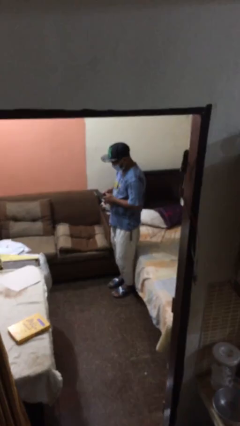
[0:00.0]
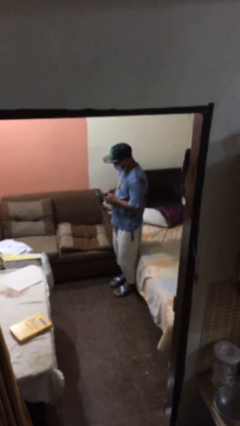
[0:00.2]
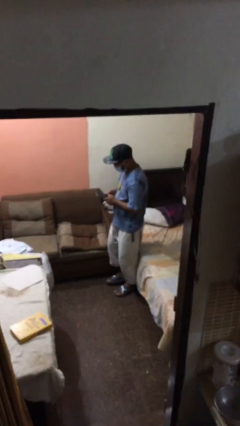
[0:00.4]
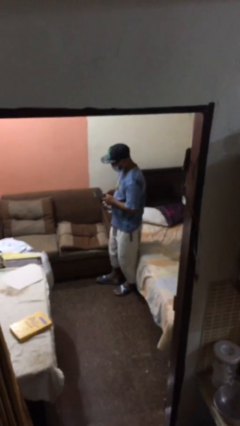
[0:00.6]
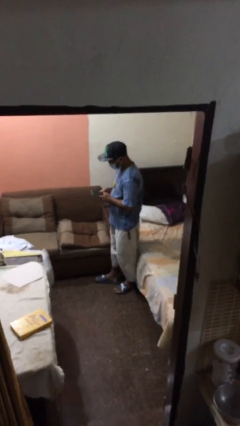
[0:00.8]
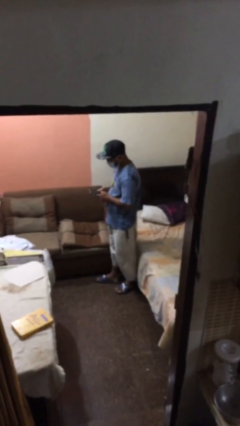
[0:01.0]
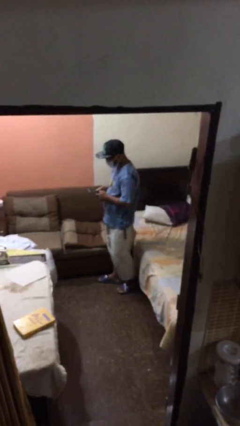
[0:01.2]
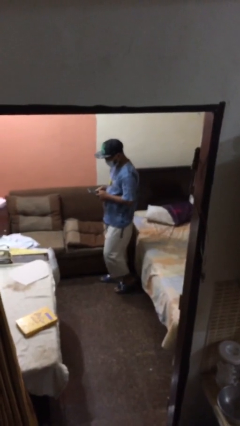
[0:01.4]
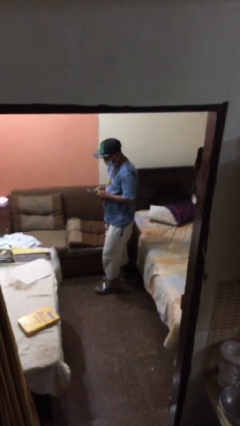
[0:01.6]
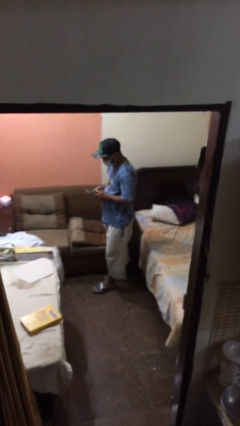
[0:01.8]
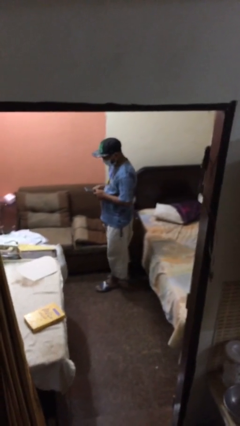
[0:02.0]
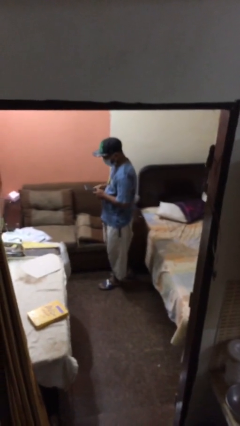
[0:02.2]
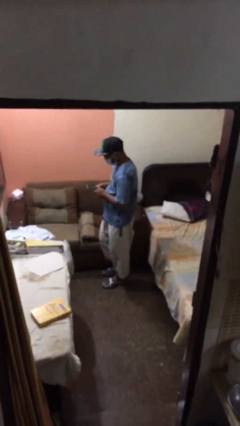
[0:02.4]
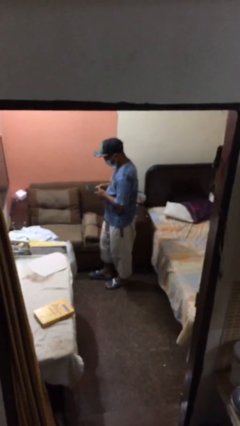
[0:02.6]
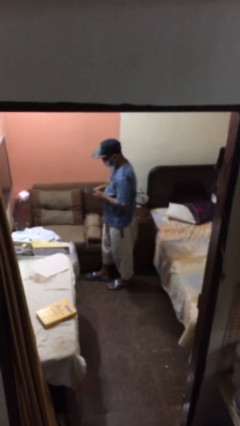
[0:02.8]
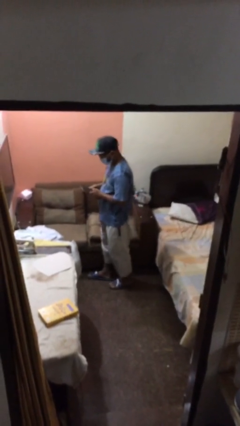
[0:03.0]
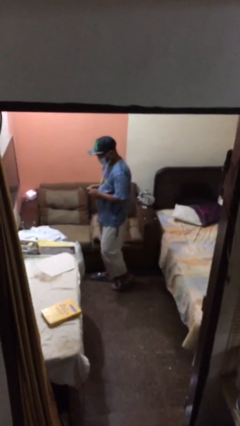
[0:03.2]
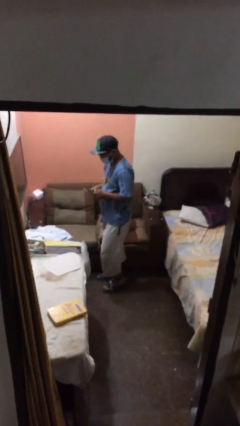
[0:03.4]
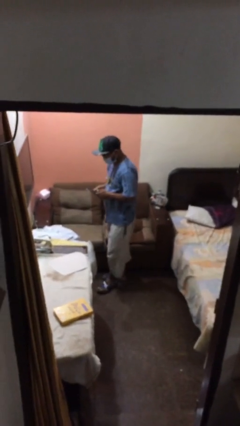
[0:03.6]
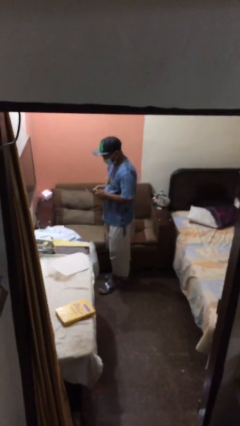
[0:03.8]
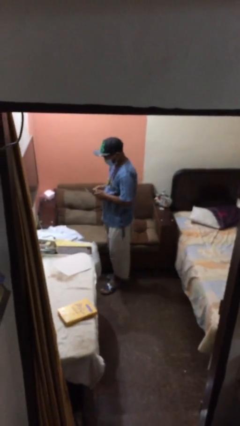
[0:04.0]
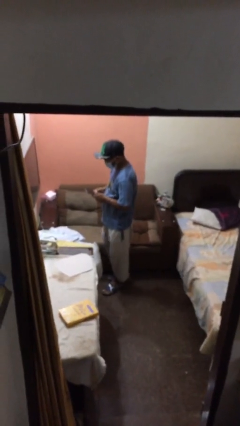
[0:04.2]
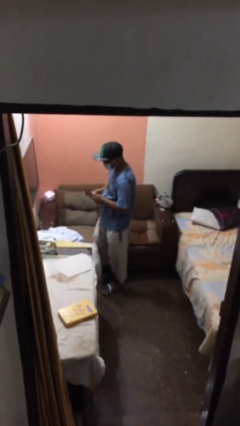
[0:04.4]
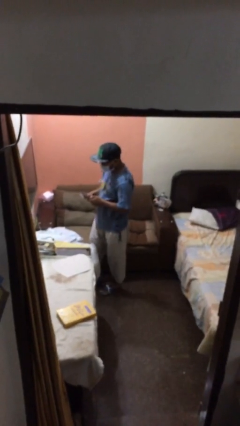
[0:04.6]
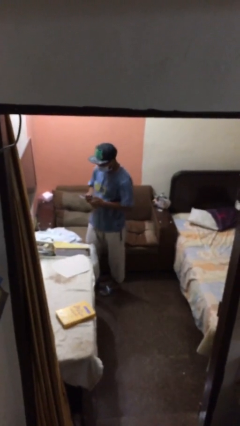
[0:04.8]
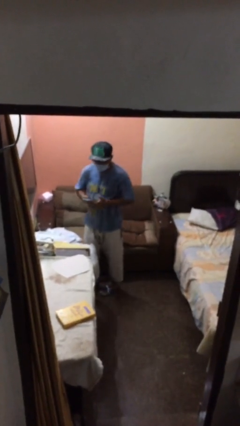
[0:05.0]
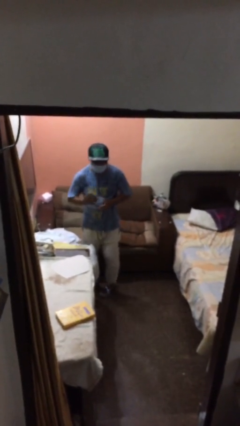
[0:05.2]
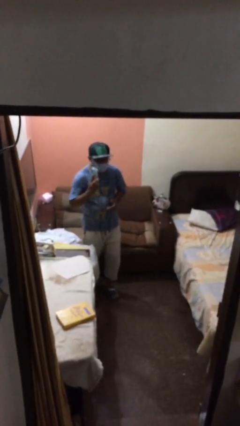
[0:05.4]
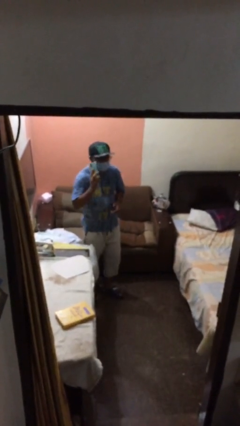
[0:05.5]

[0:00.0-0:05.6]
person texts on phone

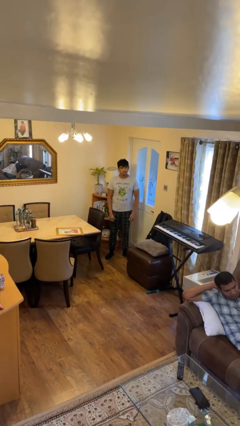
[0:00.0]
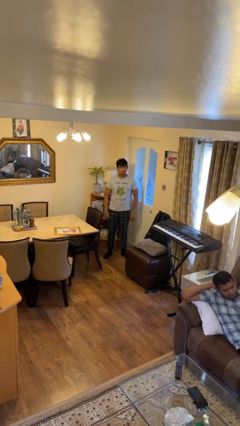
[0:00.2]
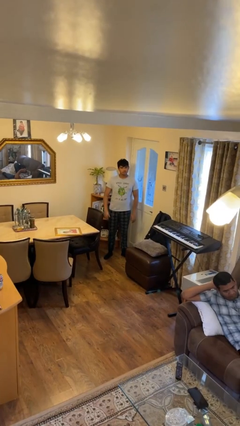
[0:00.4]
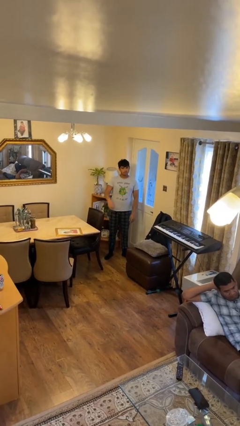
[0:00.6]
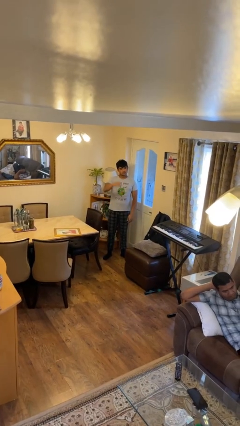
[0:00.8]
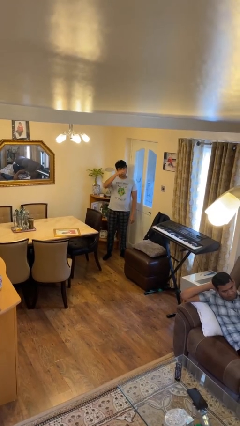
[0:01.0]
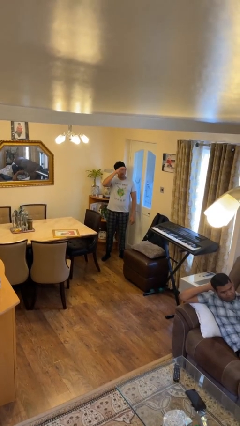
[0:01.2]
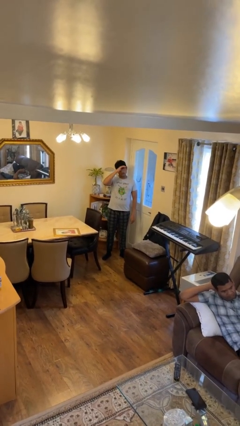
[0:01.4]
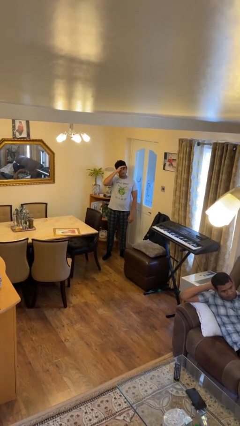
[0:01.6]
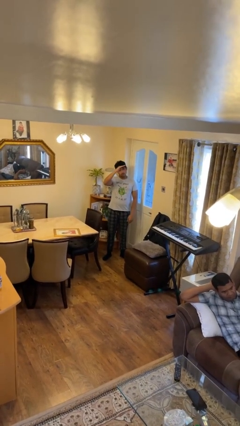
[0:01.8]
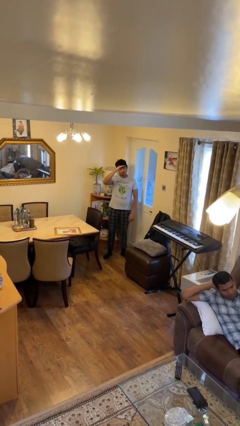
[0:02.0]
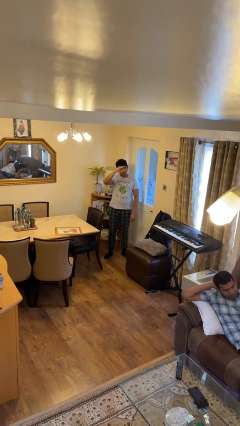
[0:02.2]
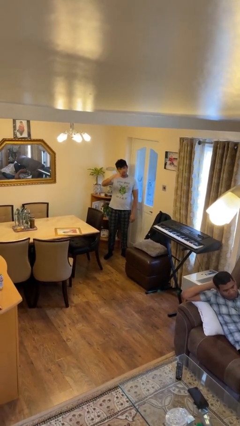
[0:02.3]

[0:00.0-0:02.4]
person salutes

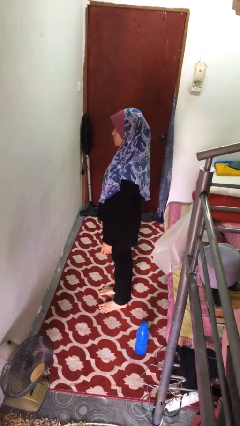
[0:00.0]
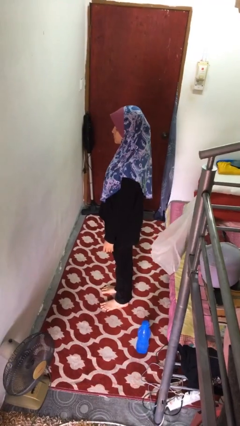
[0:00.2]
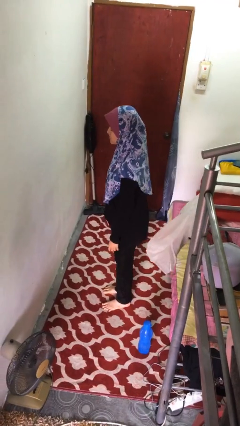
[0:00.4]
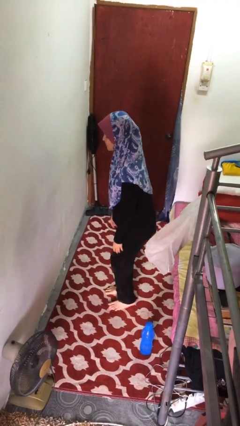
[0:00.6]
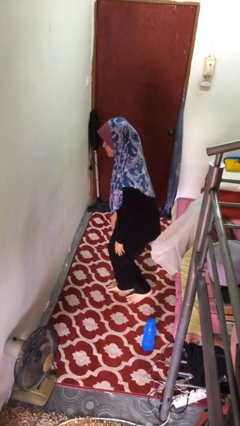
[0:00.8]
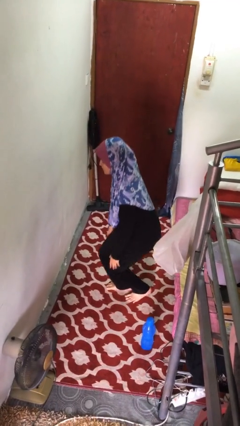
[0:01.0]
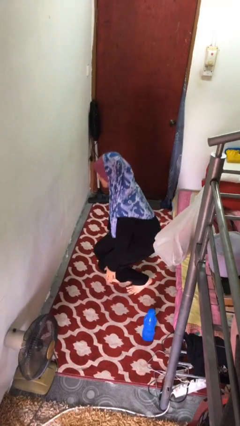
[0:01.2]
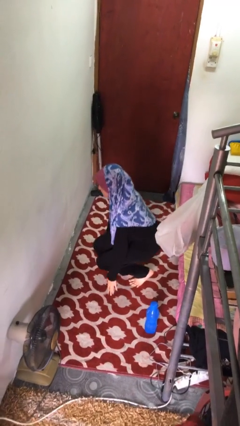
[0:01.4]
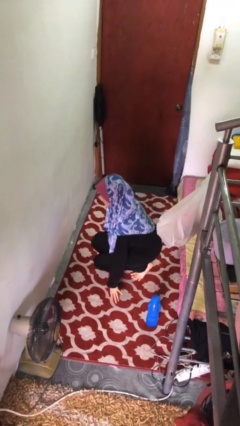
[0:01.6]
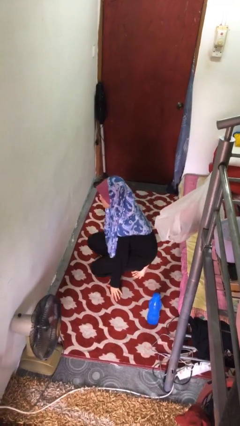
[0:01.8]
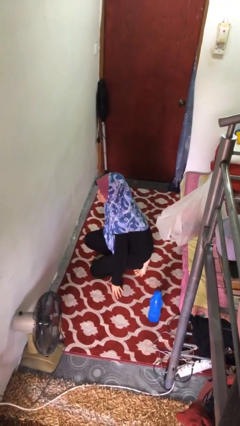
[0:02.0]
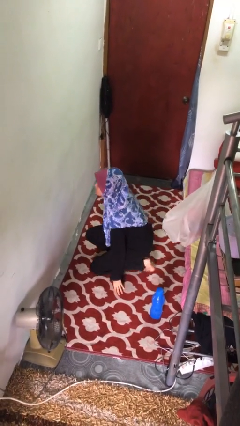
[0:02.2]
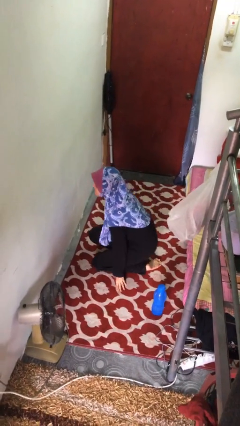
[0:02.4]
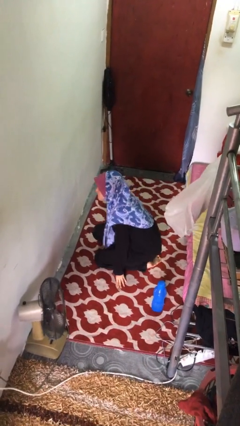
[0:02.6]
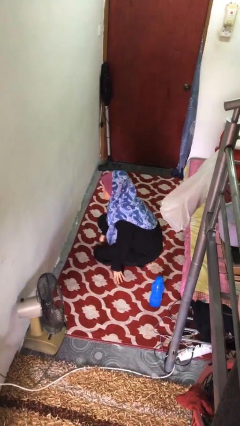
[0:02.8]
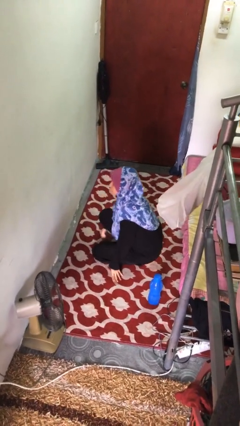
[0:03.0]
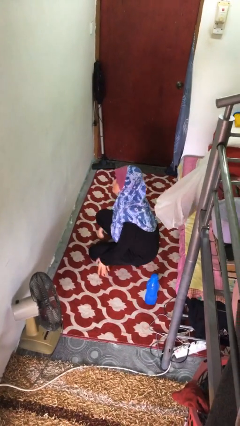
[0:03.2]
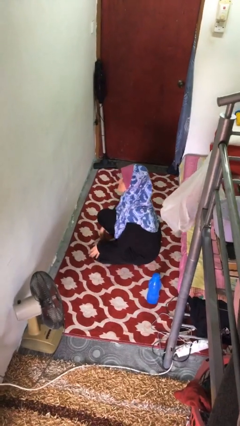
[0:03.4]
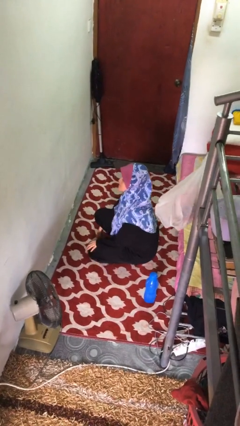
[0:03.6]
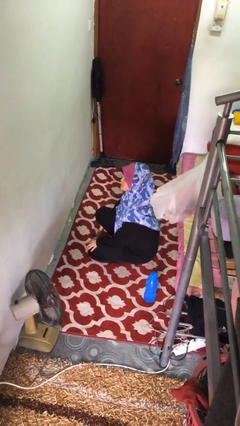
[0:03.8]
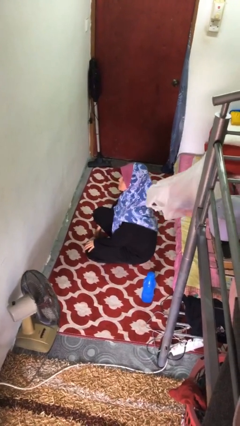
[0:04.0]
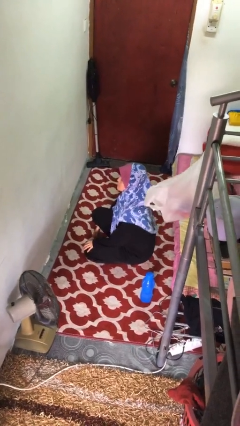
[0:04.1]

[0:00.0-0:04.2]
person kneels

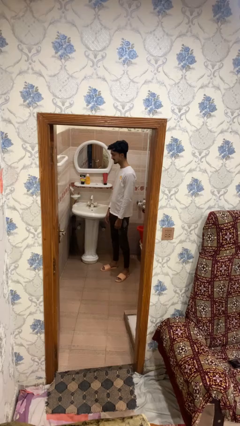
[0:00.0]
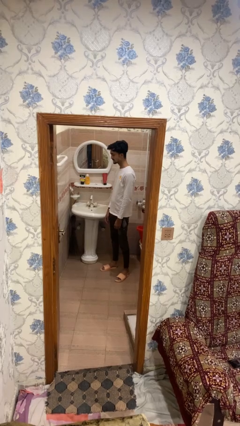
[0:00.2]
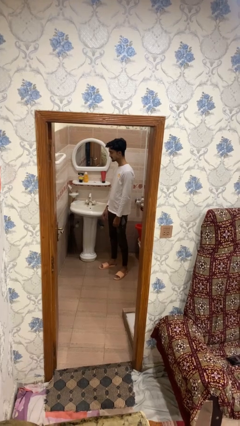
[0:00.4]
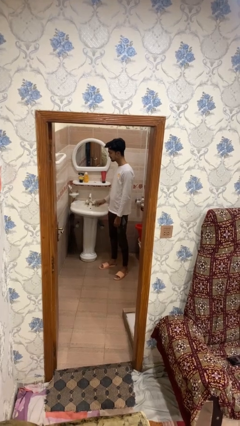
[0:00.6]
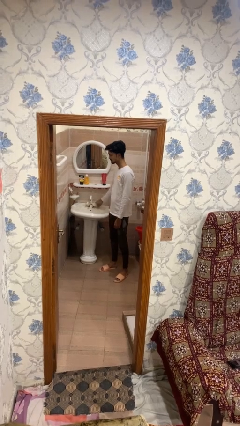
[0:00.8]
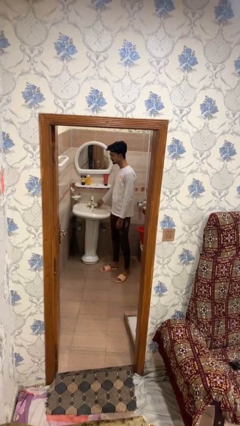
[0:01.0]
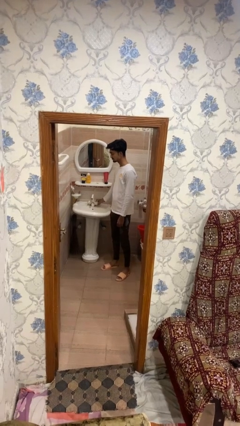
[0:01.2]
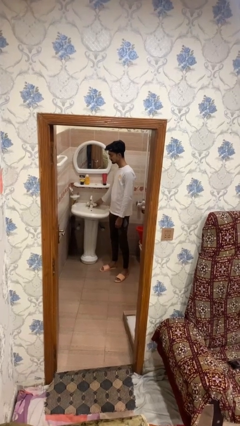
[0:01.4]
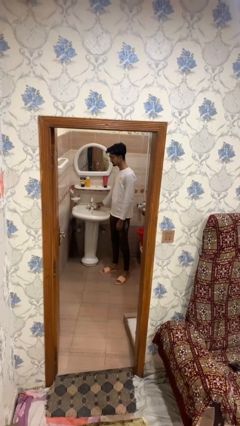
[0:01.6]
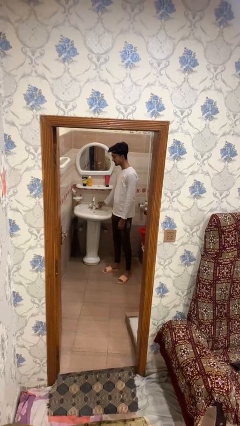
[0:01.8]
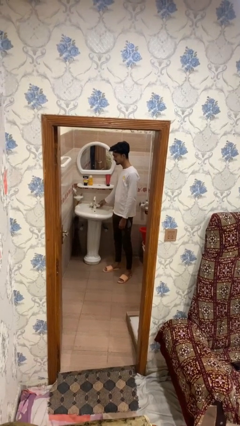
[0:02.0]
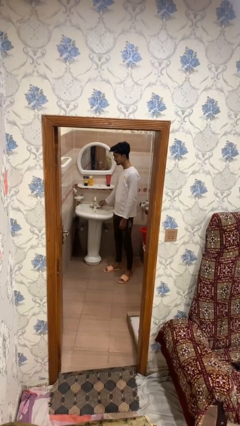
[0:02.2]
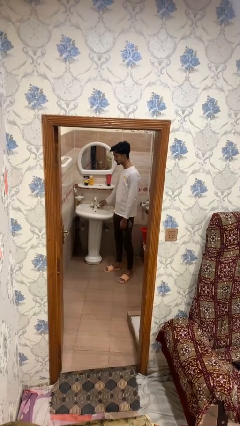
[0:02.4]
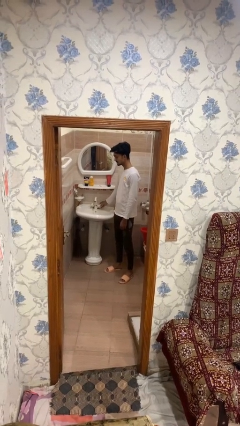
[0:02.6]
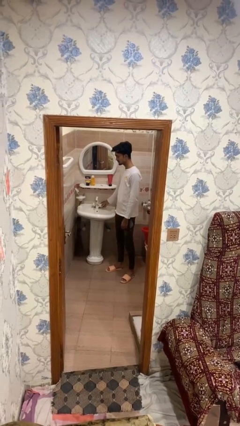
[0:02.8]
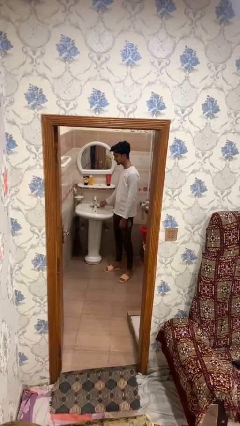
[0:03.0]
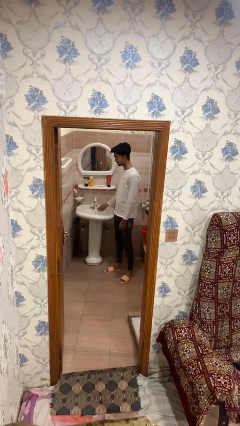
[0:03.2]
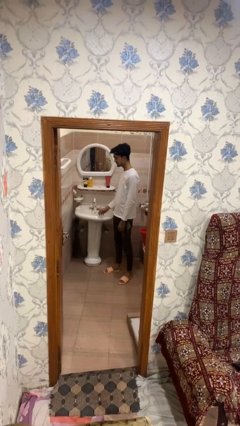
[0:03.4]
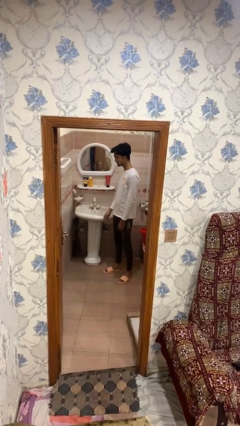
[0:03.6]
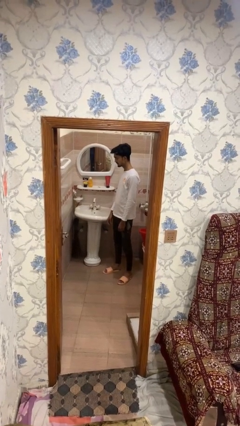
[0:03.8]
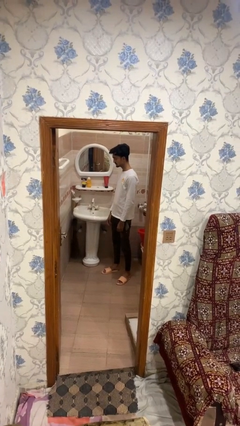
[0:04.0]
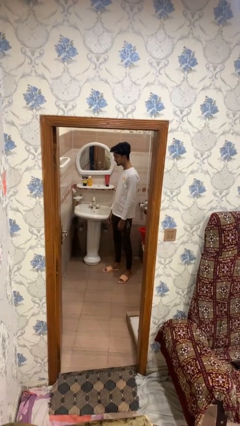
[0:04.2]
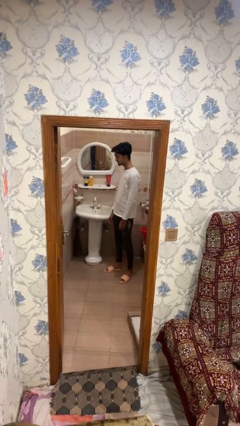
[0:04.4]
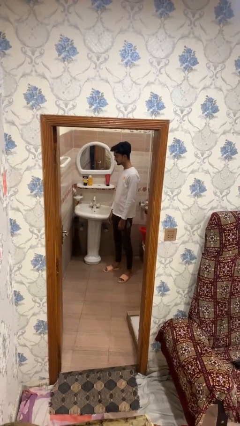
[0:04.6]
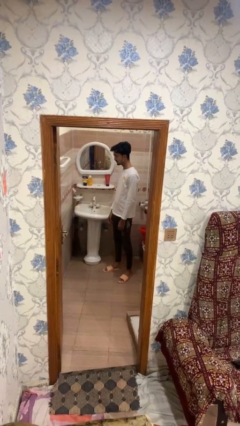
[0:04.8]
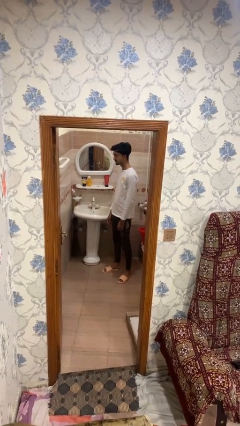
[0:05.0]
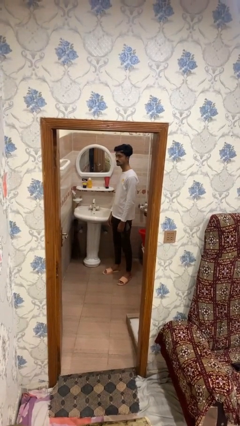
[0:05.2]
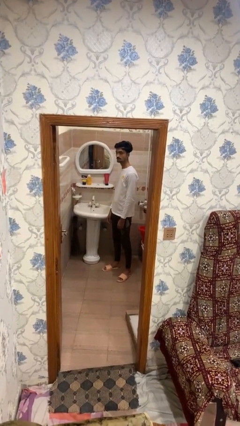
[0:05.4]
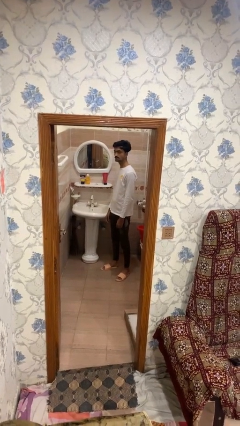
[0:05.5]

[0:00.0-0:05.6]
person turns on faucet

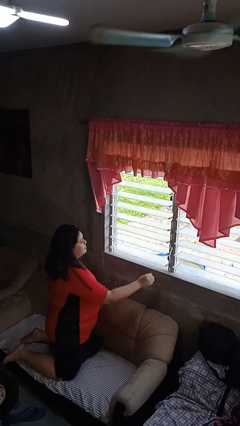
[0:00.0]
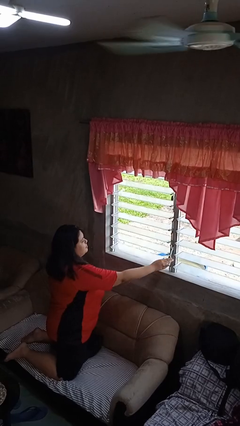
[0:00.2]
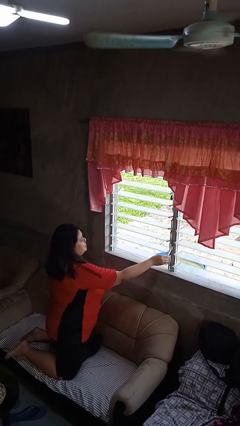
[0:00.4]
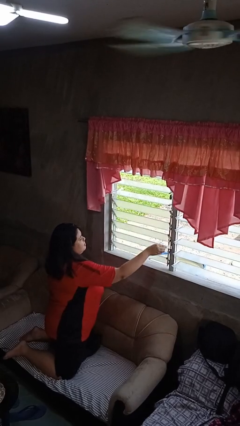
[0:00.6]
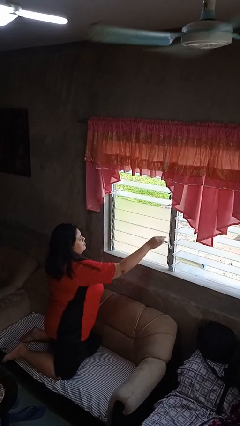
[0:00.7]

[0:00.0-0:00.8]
person closes home window
